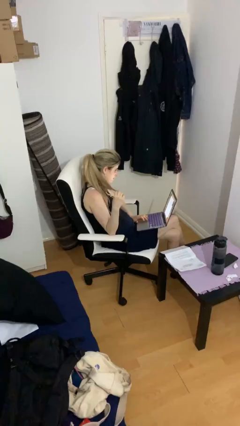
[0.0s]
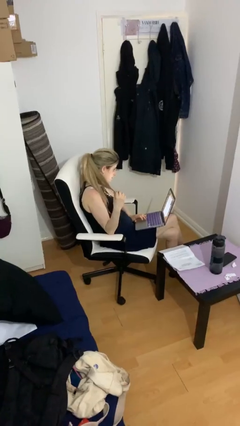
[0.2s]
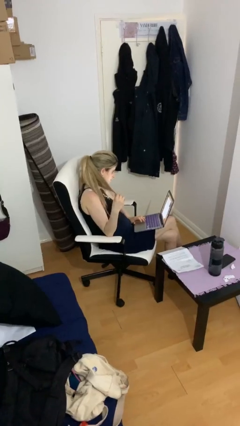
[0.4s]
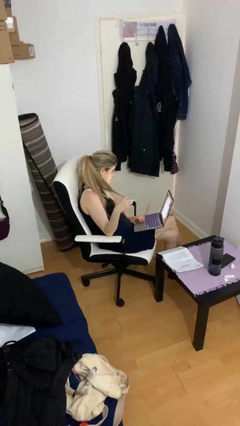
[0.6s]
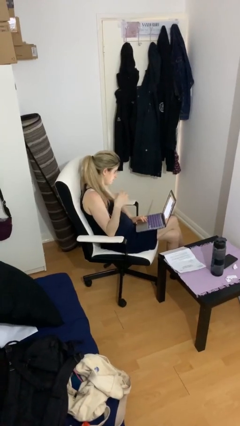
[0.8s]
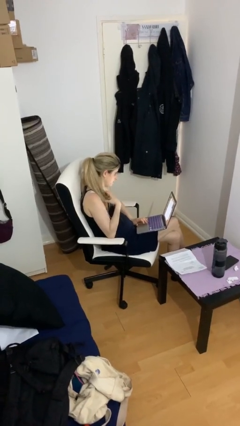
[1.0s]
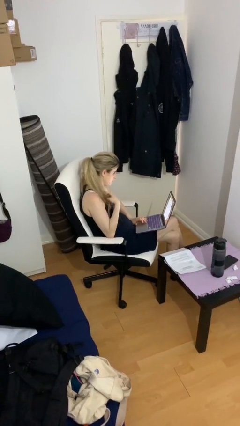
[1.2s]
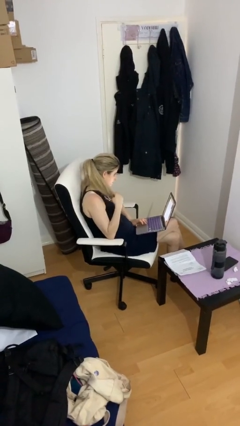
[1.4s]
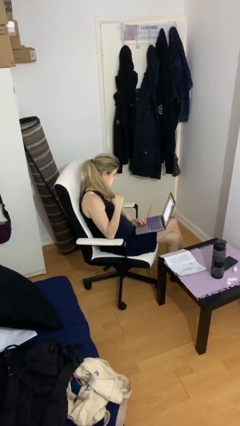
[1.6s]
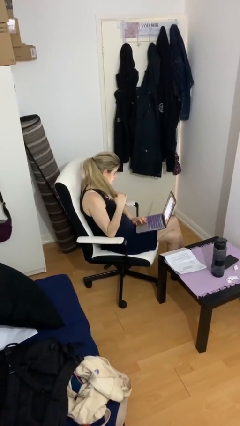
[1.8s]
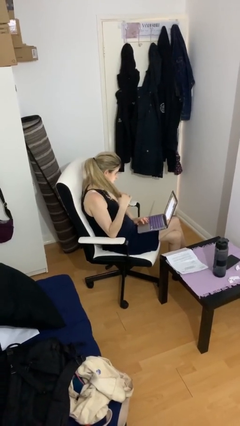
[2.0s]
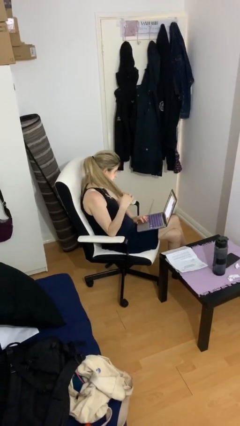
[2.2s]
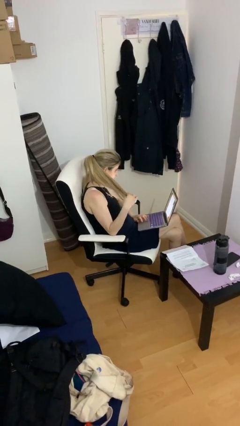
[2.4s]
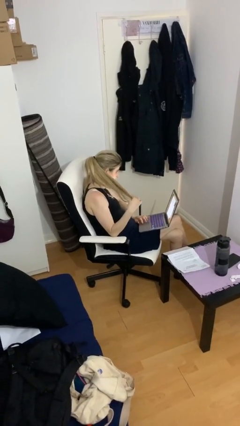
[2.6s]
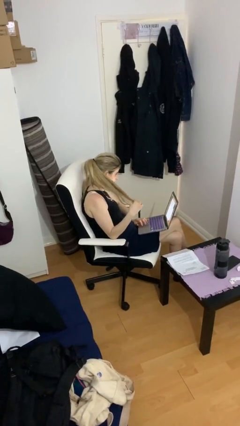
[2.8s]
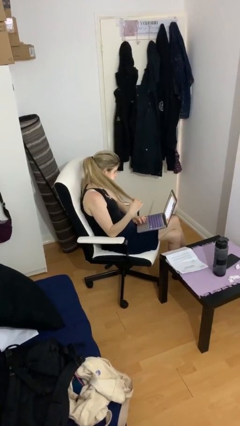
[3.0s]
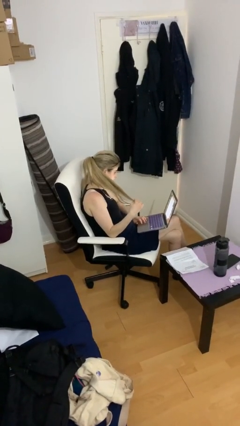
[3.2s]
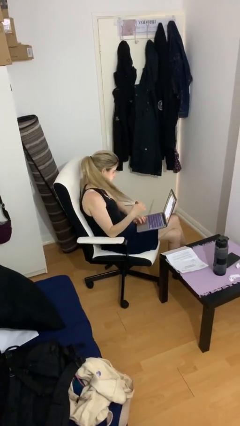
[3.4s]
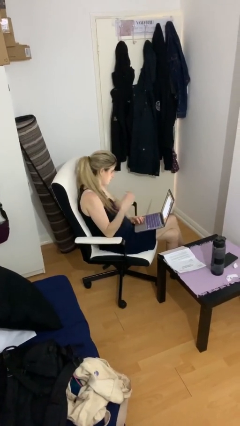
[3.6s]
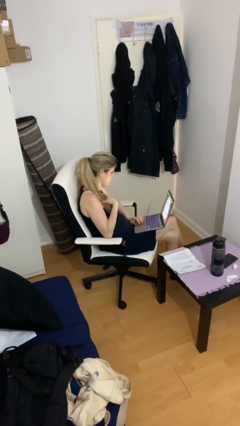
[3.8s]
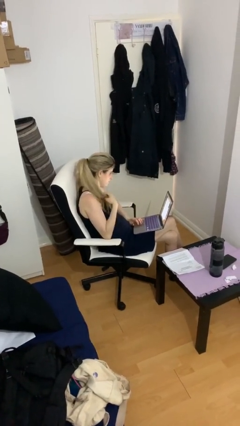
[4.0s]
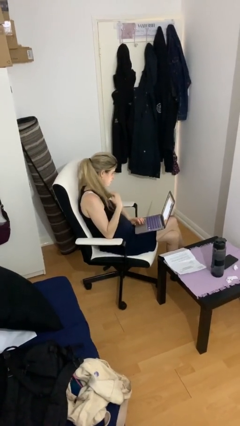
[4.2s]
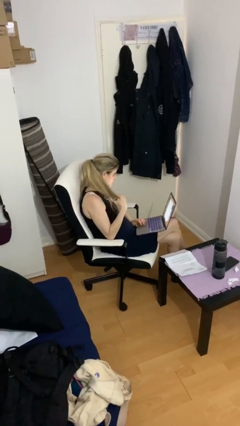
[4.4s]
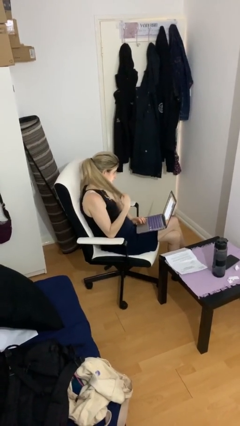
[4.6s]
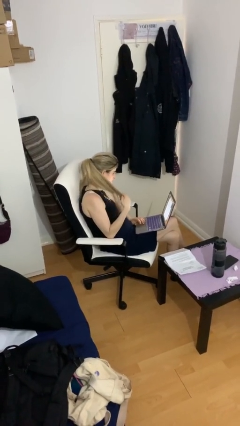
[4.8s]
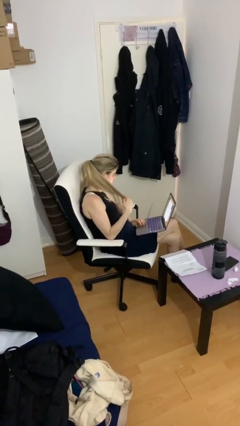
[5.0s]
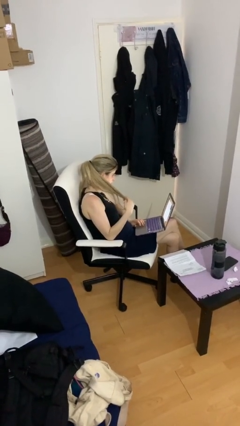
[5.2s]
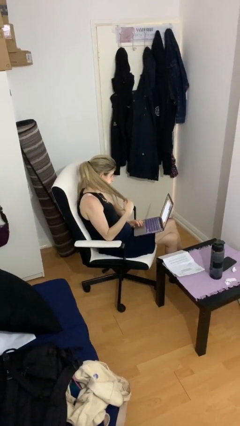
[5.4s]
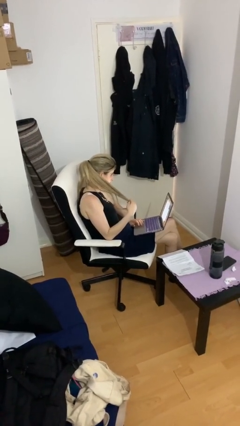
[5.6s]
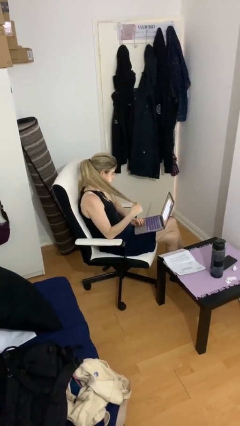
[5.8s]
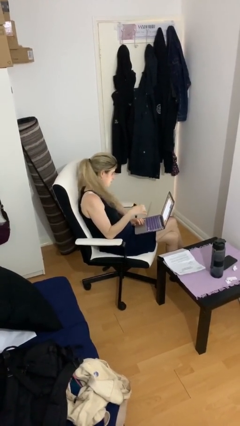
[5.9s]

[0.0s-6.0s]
person interacts with laptop

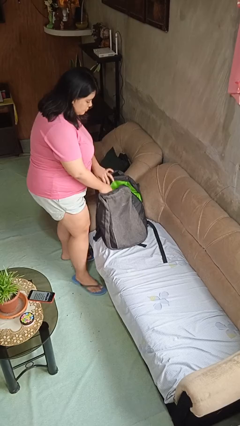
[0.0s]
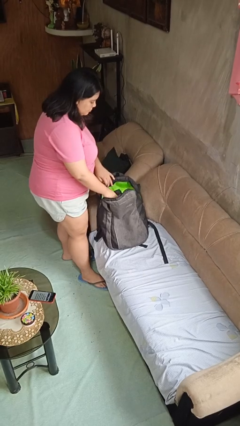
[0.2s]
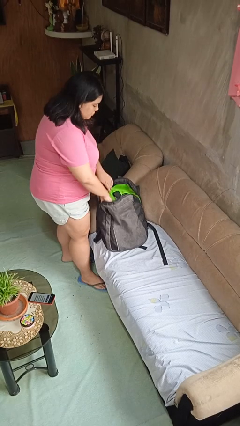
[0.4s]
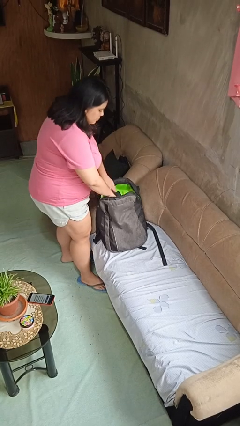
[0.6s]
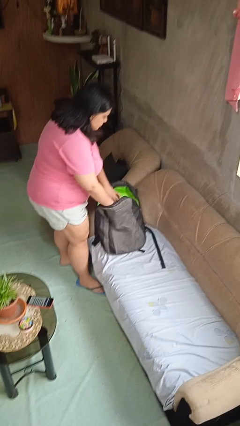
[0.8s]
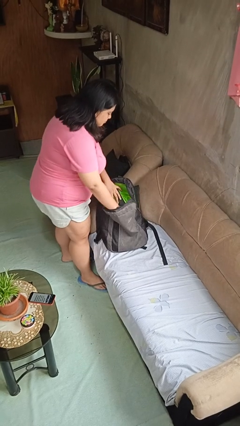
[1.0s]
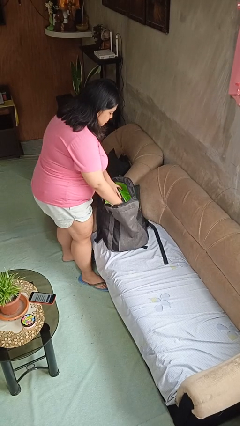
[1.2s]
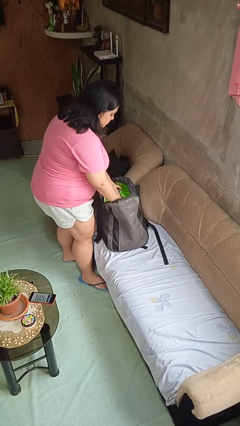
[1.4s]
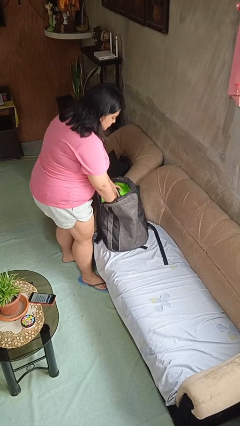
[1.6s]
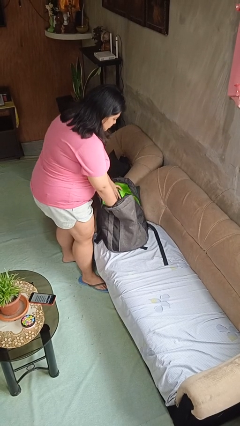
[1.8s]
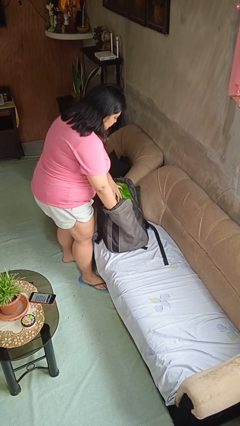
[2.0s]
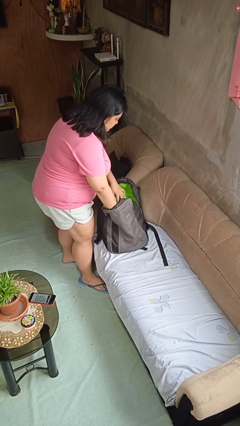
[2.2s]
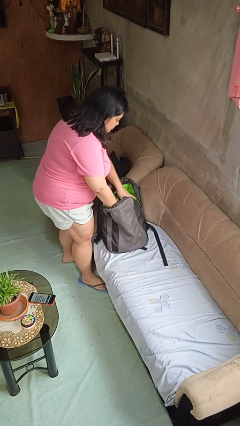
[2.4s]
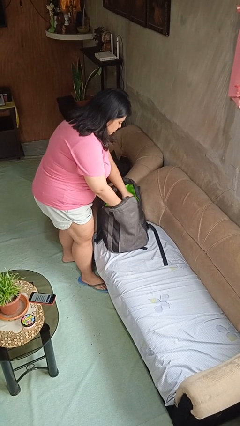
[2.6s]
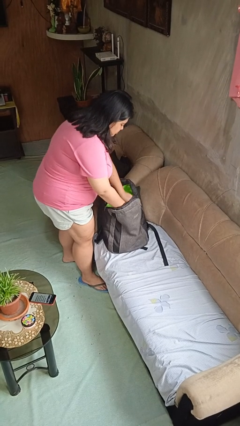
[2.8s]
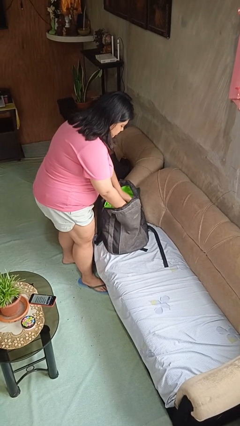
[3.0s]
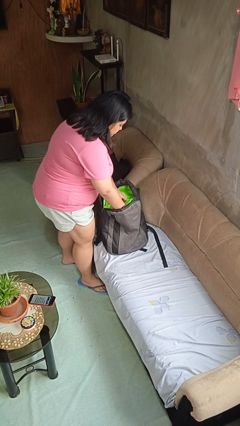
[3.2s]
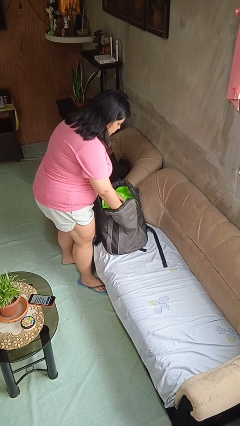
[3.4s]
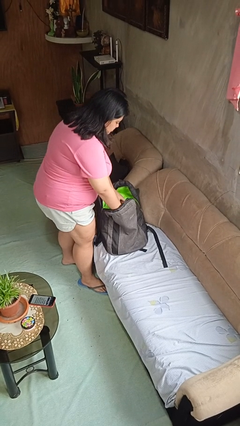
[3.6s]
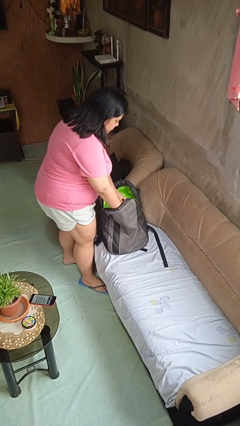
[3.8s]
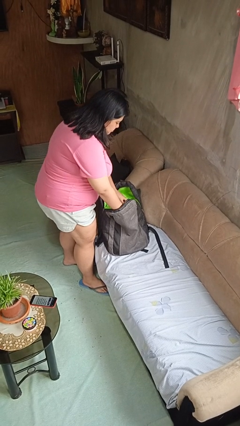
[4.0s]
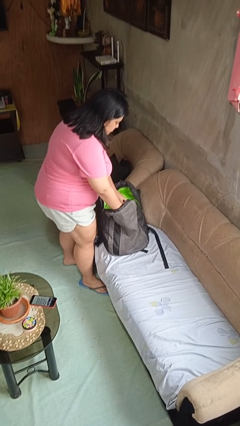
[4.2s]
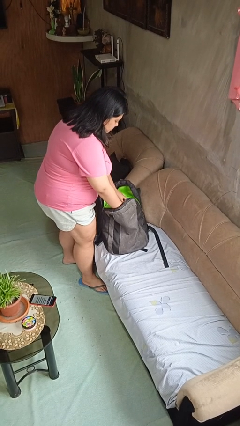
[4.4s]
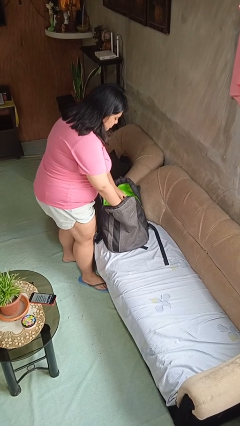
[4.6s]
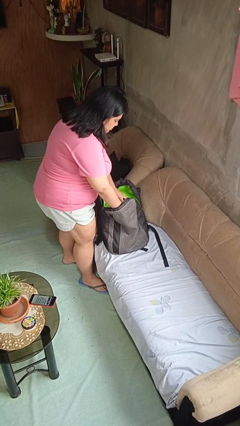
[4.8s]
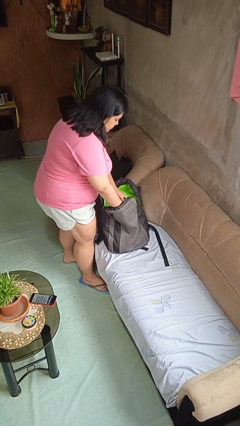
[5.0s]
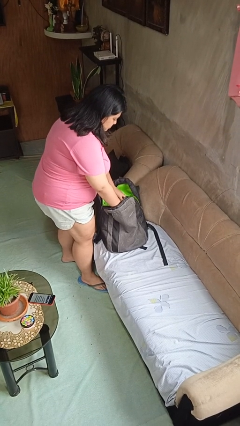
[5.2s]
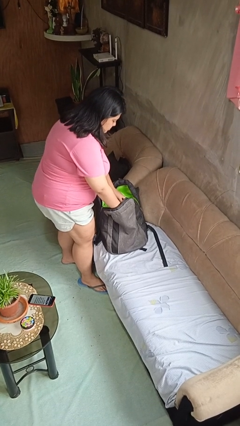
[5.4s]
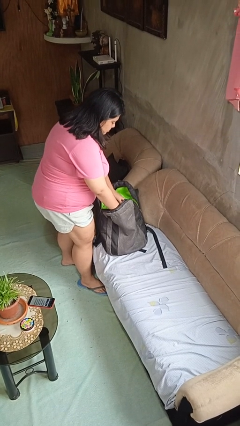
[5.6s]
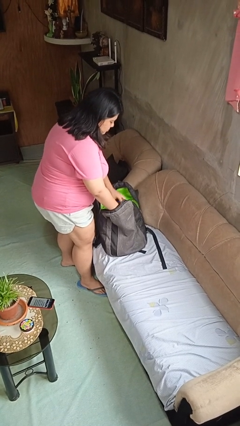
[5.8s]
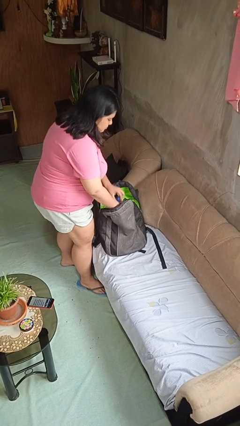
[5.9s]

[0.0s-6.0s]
person searches in backpack

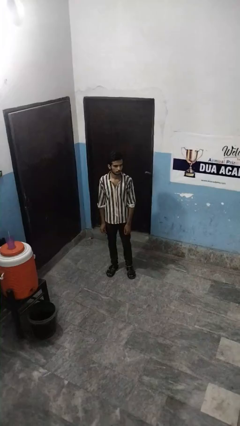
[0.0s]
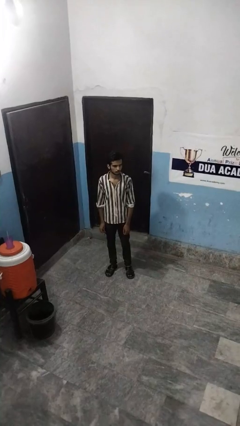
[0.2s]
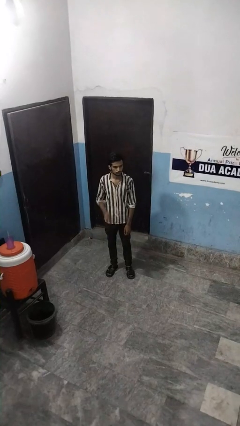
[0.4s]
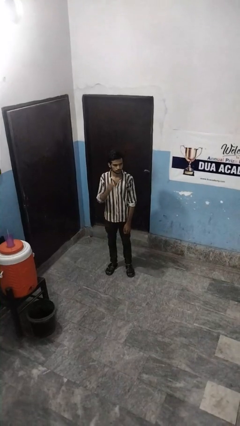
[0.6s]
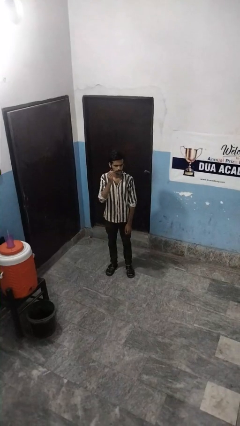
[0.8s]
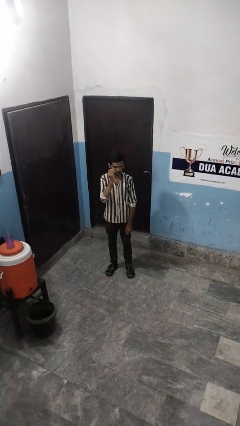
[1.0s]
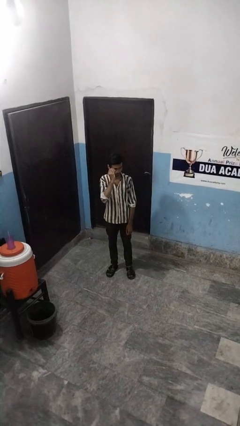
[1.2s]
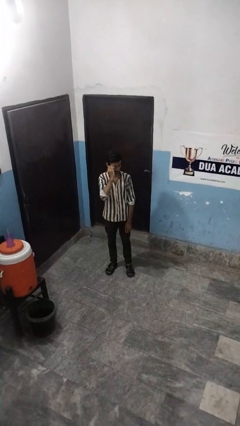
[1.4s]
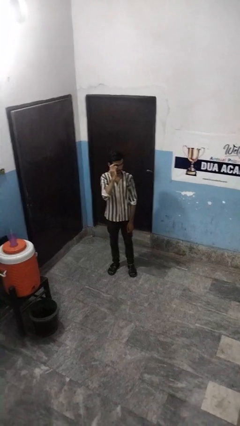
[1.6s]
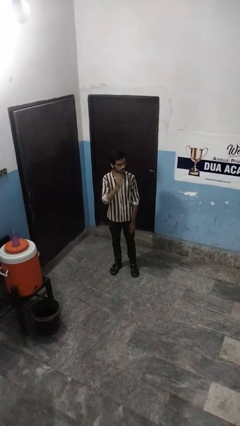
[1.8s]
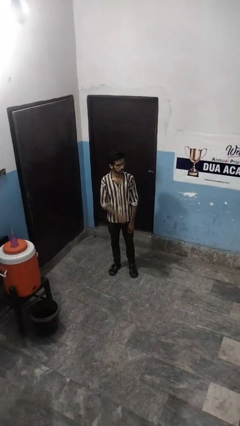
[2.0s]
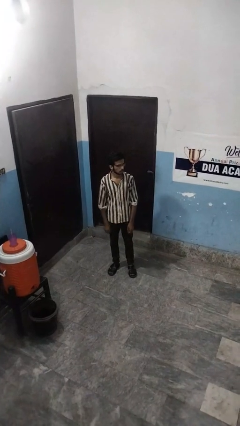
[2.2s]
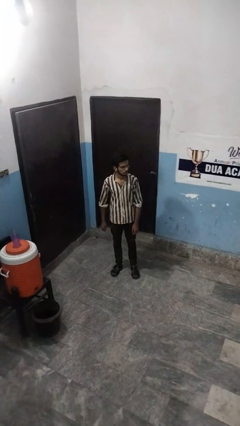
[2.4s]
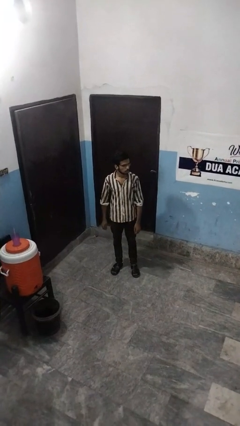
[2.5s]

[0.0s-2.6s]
person puts on glasses

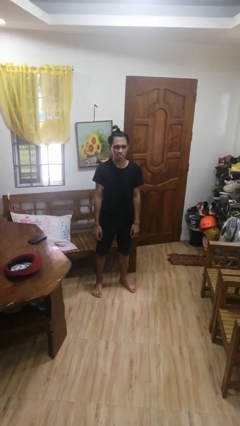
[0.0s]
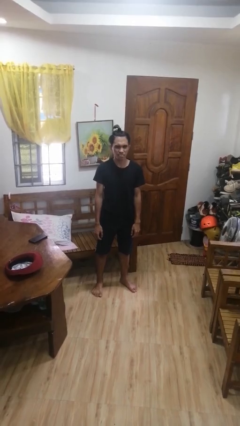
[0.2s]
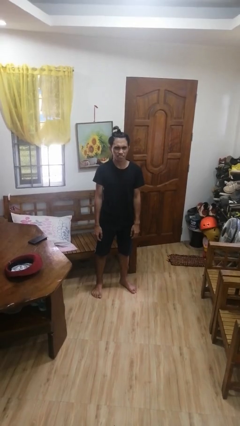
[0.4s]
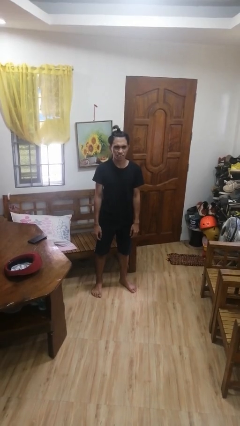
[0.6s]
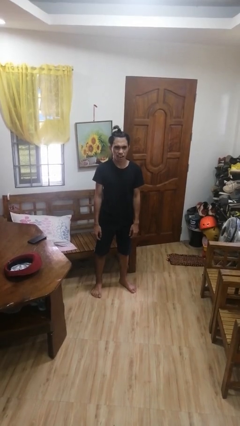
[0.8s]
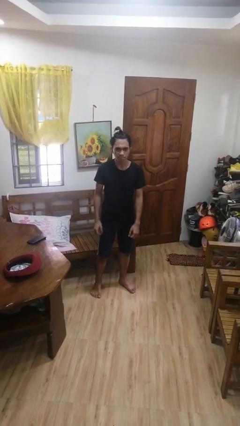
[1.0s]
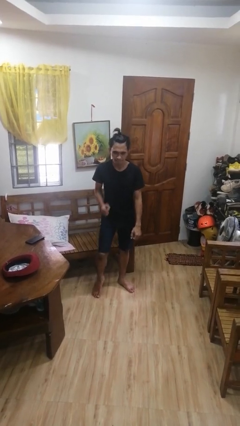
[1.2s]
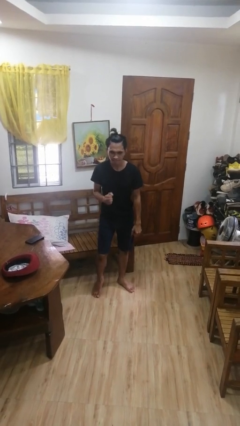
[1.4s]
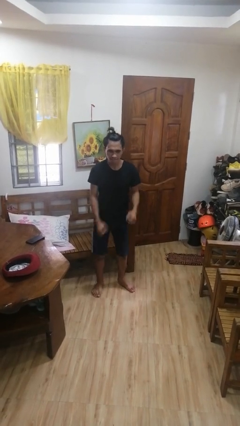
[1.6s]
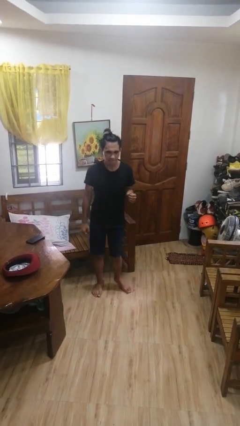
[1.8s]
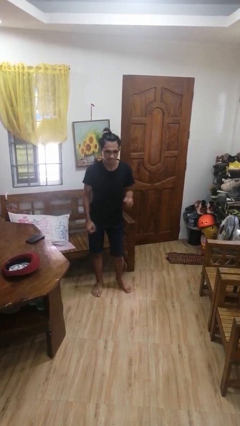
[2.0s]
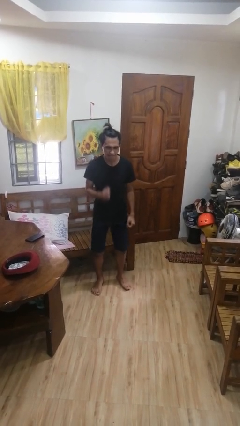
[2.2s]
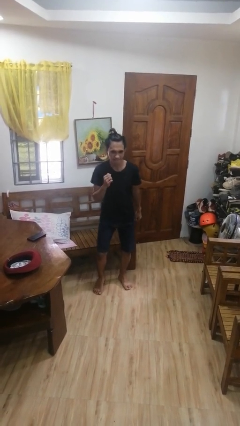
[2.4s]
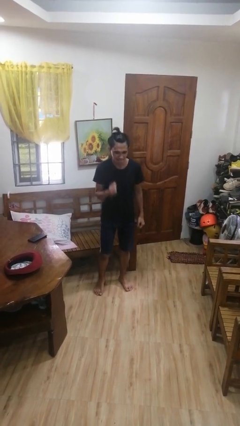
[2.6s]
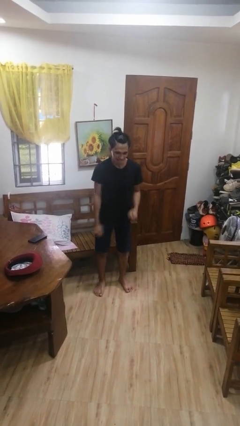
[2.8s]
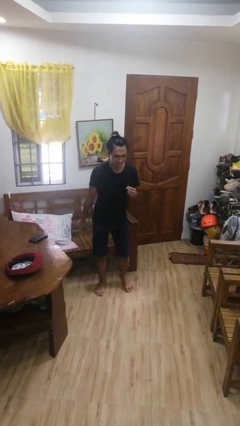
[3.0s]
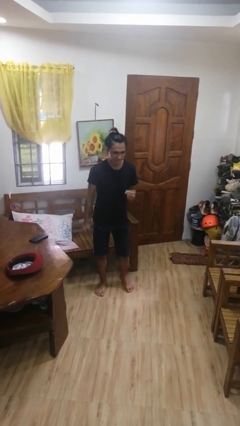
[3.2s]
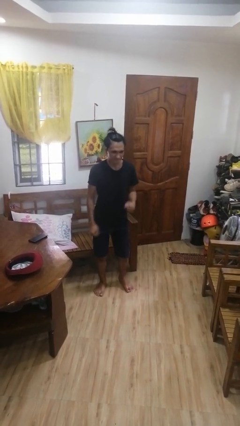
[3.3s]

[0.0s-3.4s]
person dances in place
